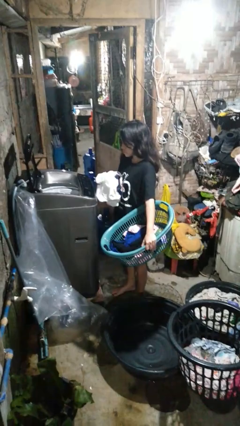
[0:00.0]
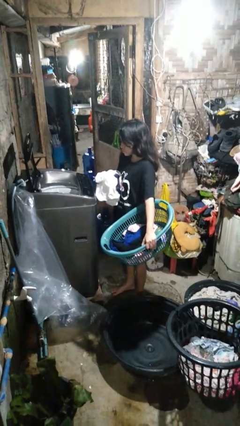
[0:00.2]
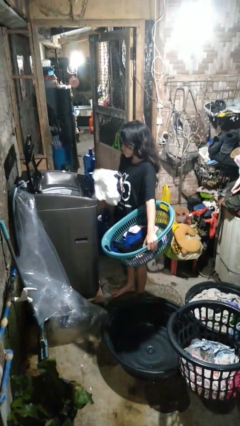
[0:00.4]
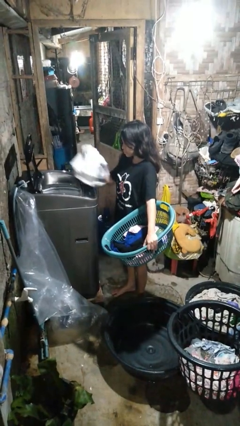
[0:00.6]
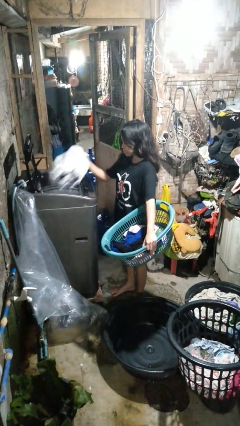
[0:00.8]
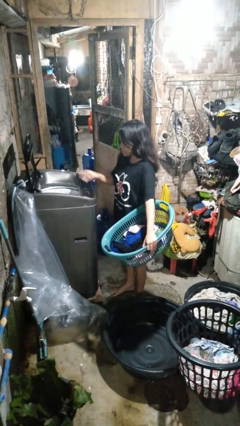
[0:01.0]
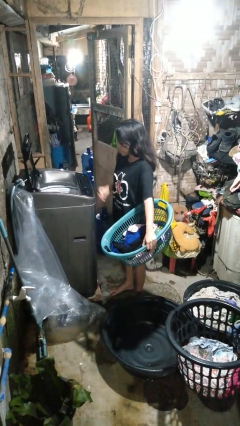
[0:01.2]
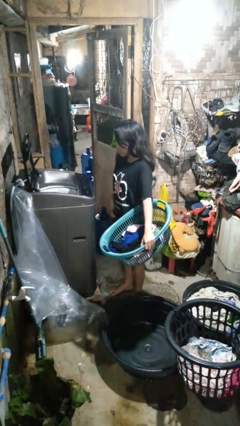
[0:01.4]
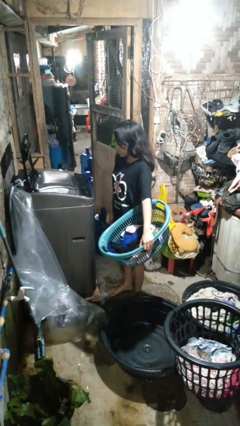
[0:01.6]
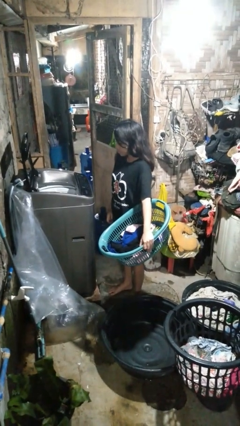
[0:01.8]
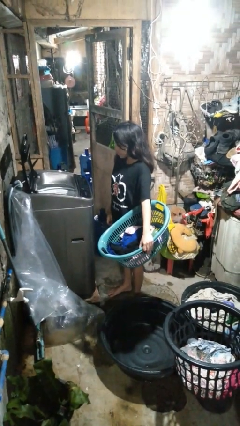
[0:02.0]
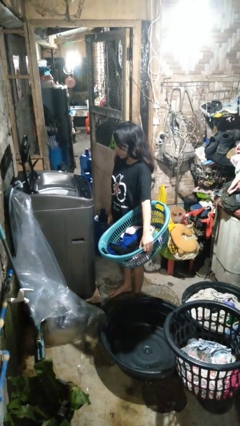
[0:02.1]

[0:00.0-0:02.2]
person loads clotheswasher

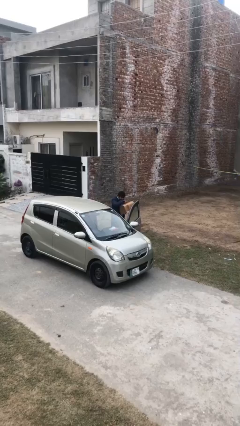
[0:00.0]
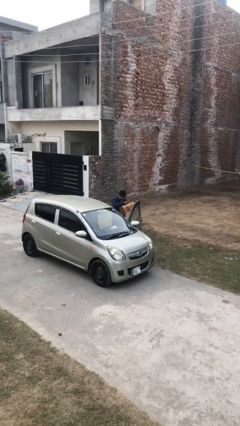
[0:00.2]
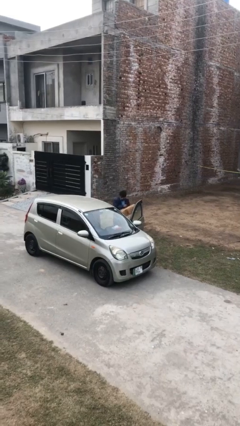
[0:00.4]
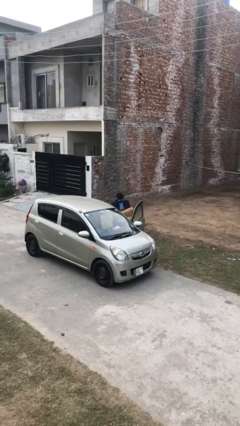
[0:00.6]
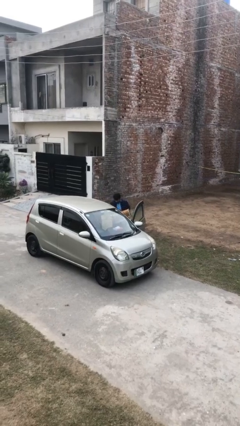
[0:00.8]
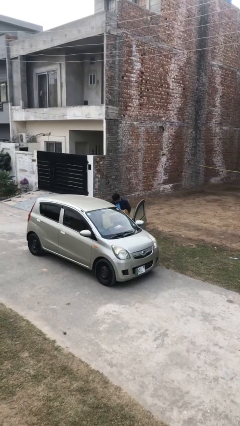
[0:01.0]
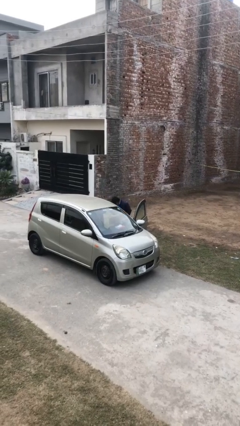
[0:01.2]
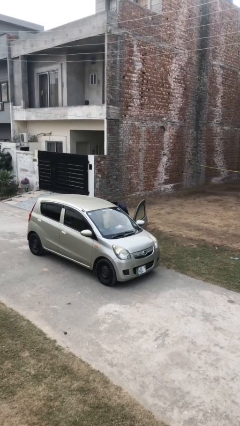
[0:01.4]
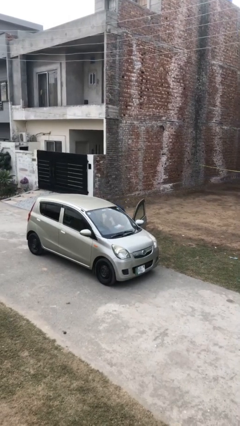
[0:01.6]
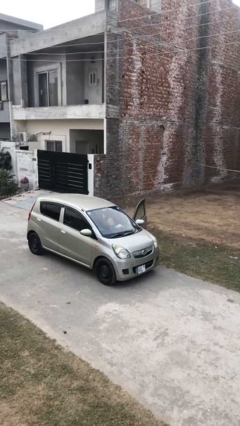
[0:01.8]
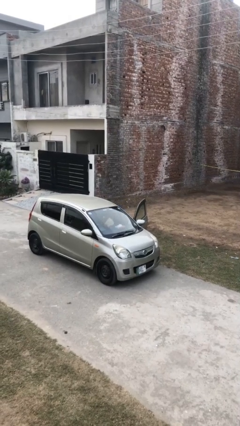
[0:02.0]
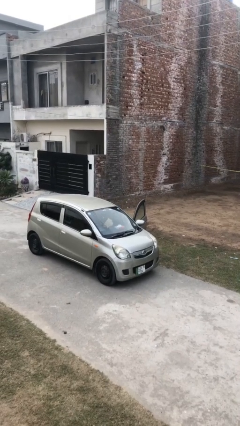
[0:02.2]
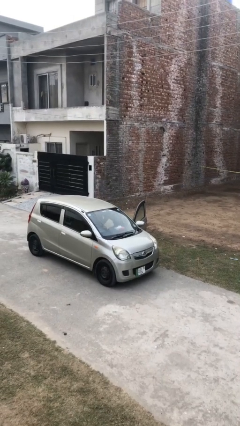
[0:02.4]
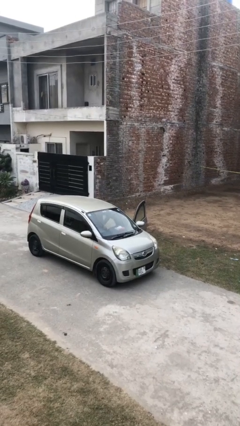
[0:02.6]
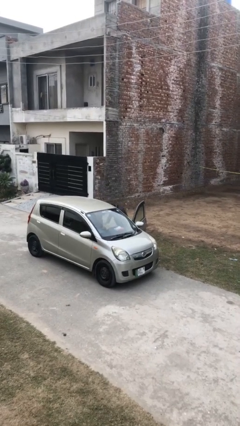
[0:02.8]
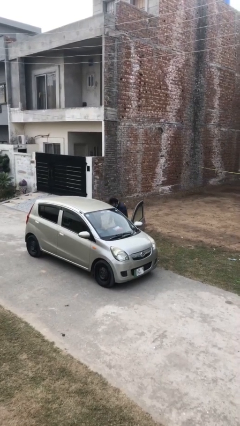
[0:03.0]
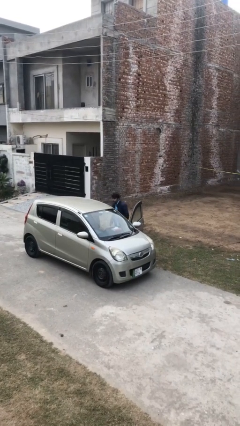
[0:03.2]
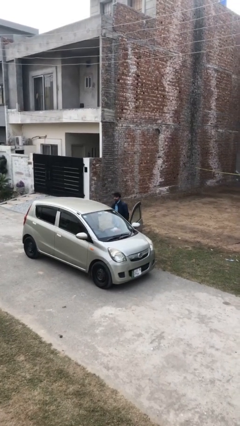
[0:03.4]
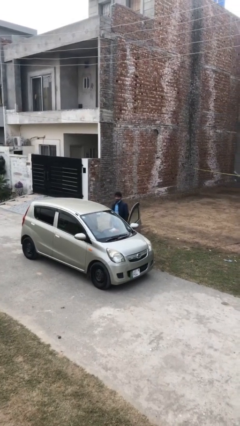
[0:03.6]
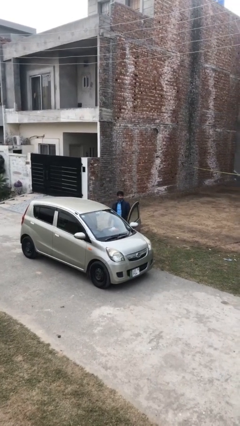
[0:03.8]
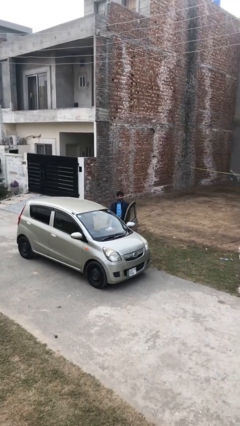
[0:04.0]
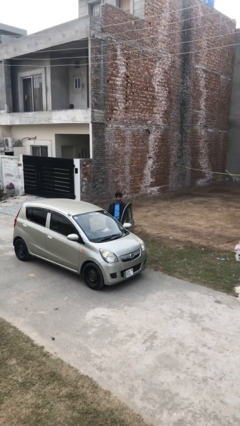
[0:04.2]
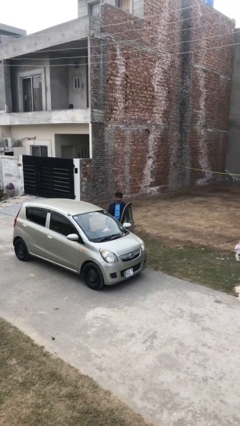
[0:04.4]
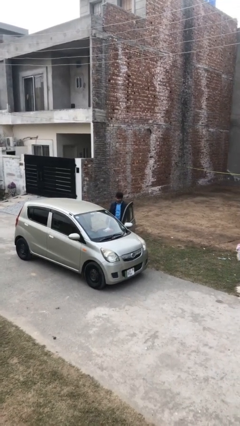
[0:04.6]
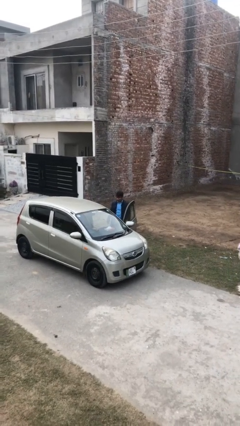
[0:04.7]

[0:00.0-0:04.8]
person loads car

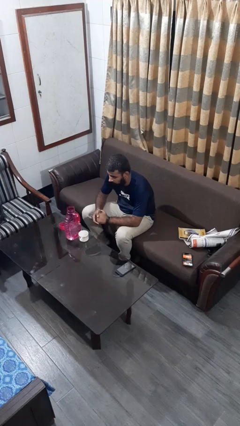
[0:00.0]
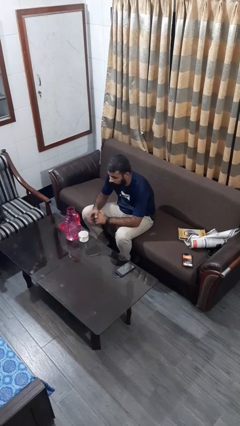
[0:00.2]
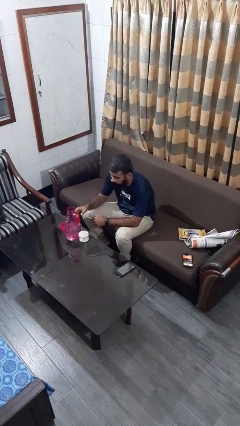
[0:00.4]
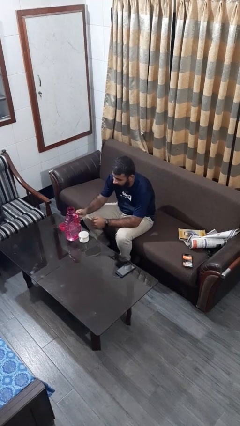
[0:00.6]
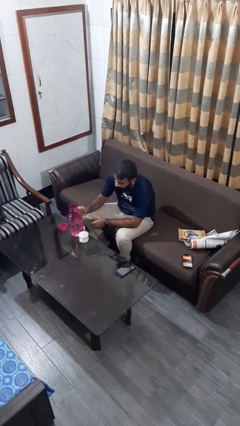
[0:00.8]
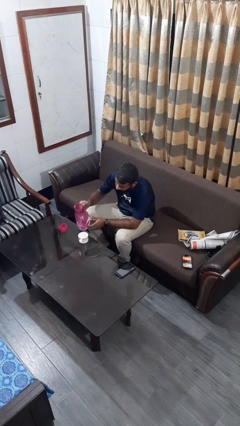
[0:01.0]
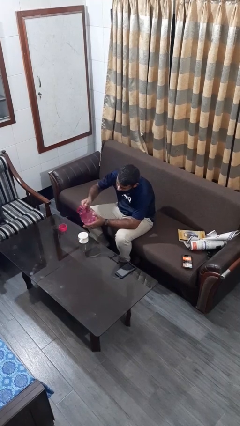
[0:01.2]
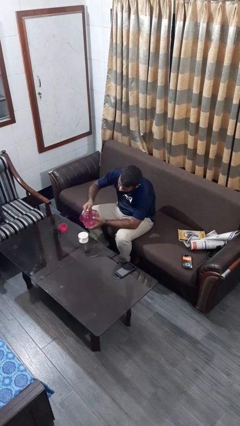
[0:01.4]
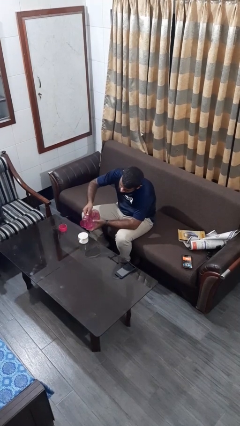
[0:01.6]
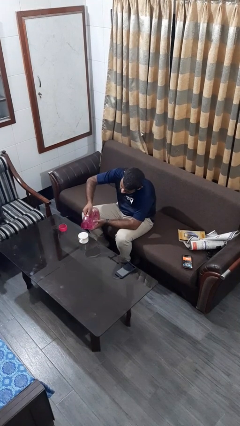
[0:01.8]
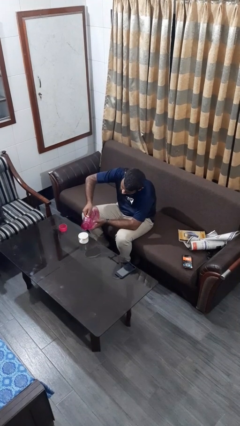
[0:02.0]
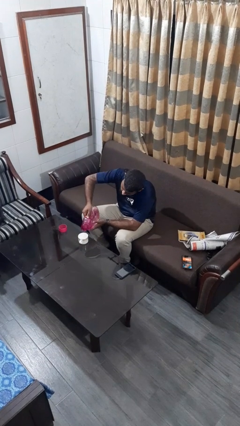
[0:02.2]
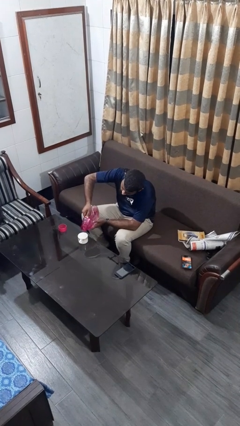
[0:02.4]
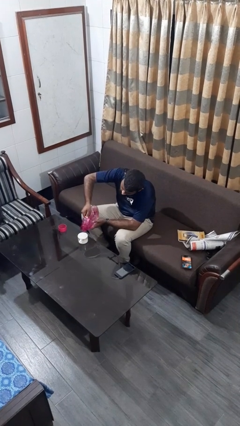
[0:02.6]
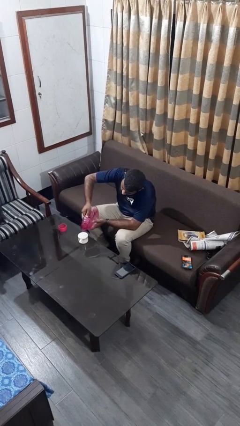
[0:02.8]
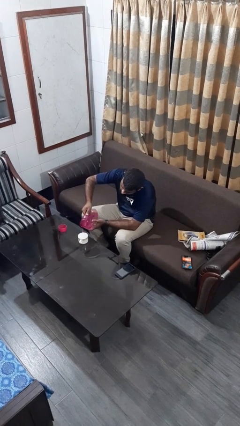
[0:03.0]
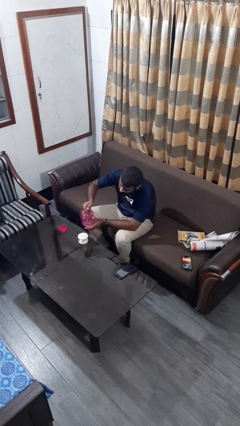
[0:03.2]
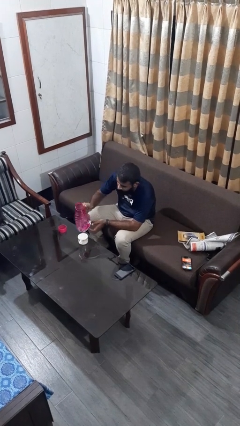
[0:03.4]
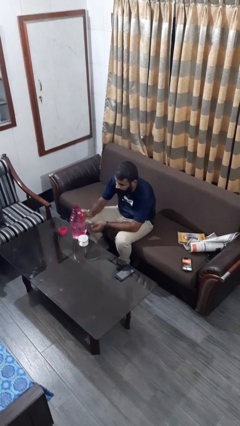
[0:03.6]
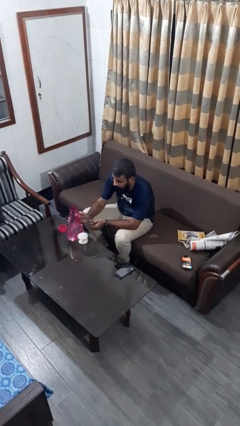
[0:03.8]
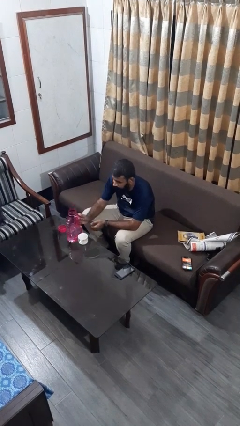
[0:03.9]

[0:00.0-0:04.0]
person pours liquid into cup

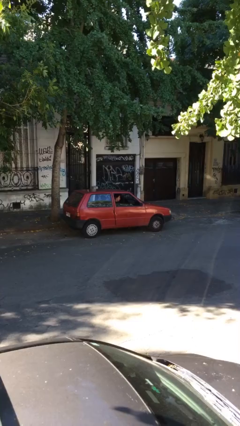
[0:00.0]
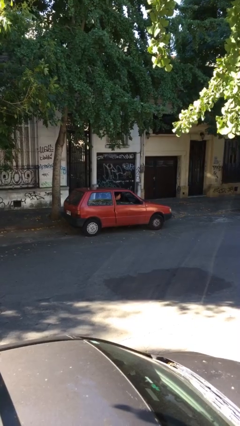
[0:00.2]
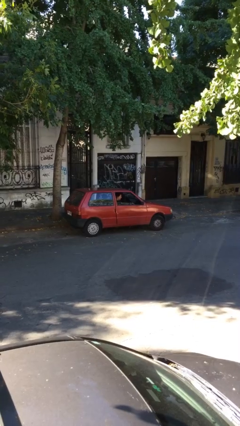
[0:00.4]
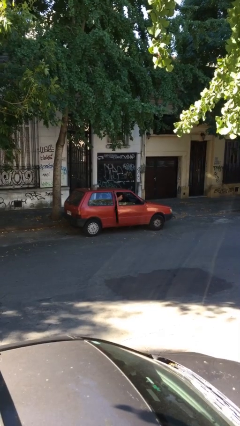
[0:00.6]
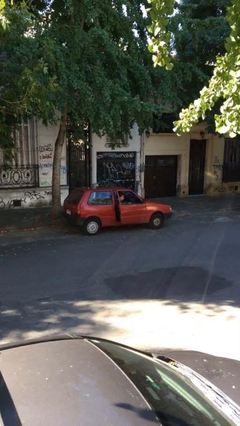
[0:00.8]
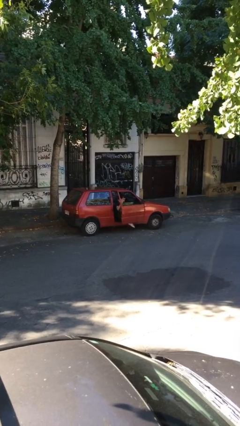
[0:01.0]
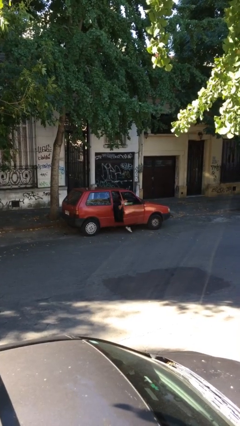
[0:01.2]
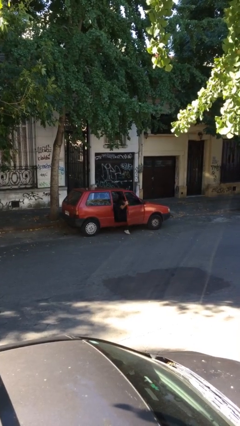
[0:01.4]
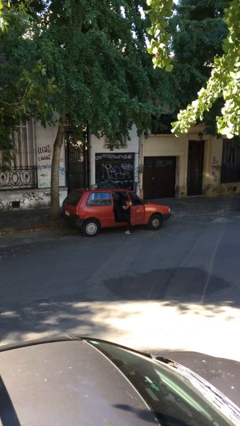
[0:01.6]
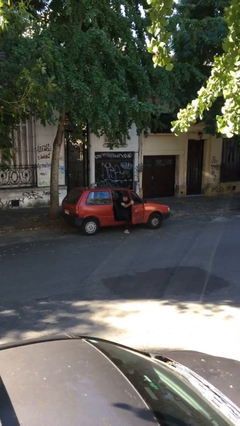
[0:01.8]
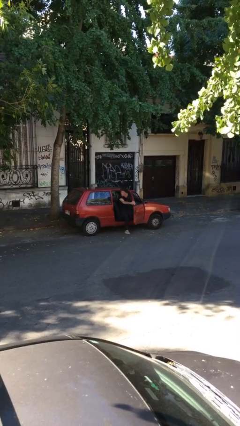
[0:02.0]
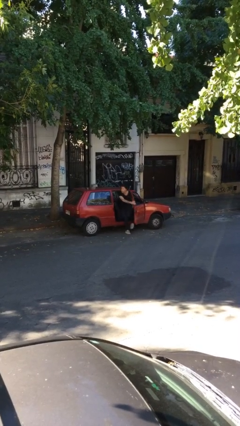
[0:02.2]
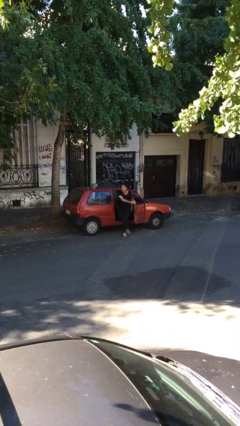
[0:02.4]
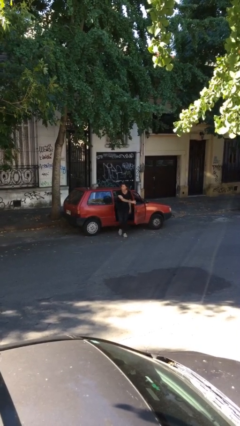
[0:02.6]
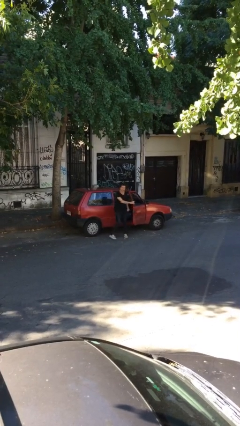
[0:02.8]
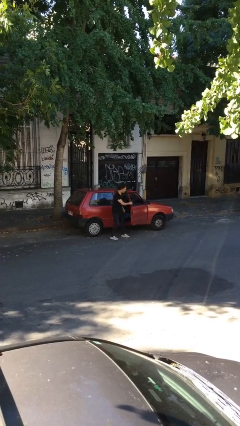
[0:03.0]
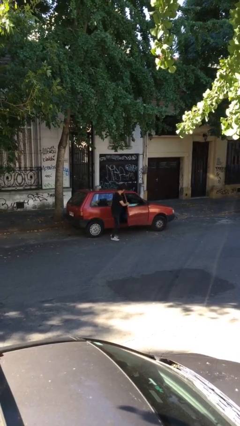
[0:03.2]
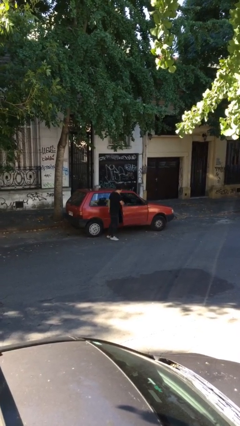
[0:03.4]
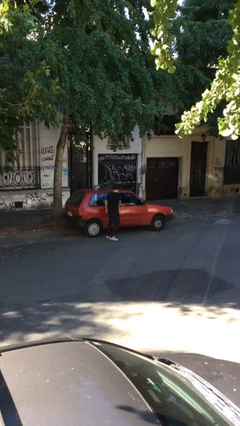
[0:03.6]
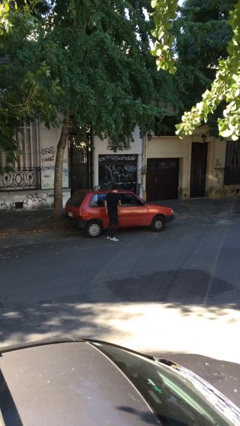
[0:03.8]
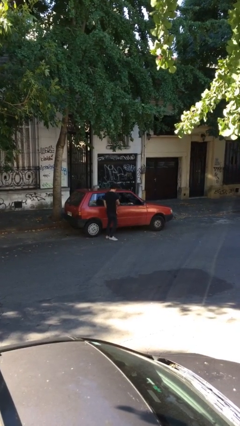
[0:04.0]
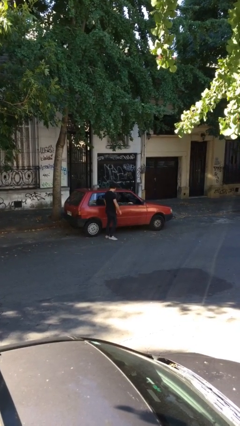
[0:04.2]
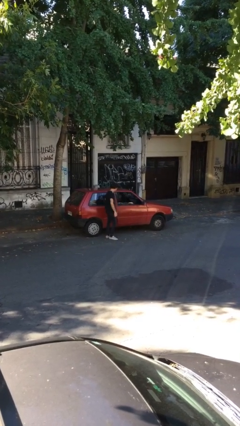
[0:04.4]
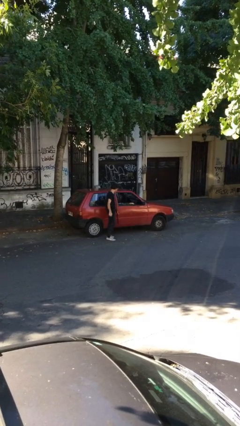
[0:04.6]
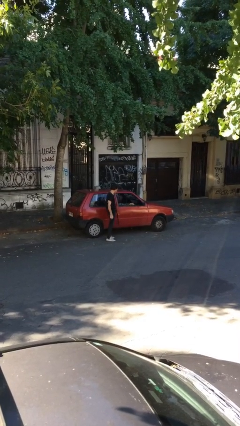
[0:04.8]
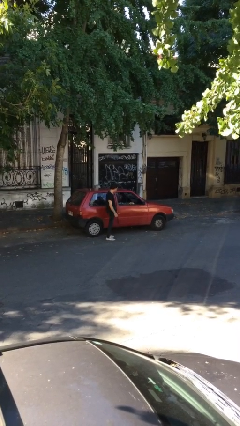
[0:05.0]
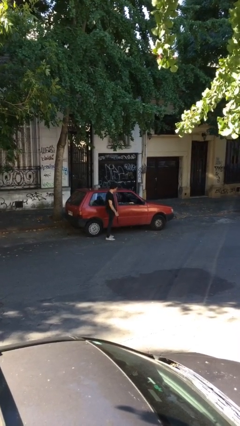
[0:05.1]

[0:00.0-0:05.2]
car drops off person

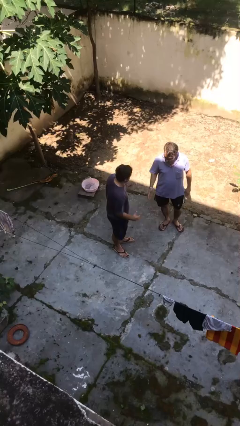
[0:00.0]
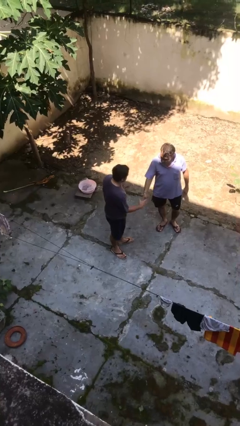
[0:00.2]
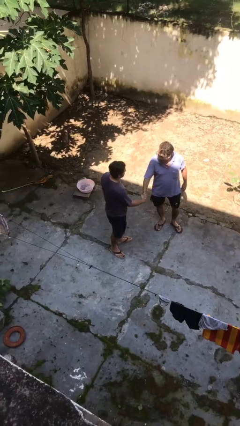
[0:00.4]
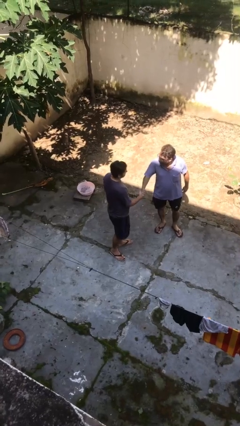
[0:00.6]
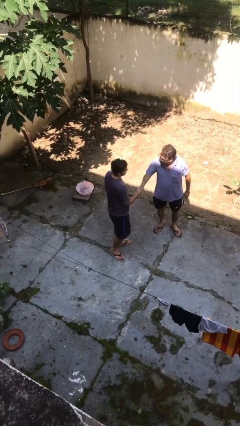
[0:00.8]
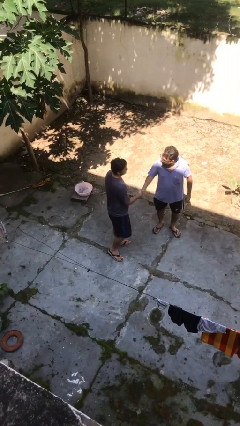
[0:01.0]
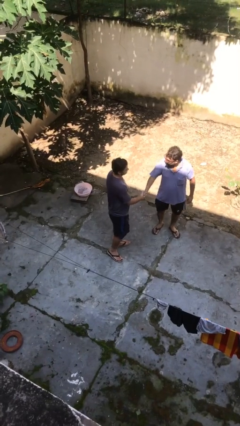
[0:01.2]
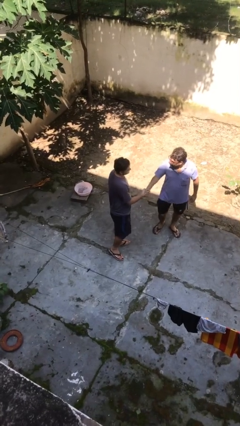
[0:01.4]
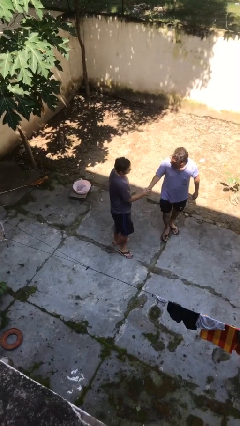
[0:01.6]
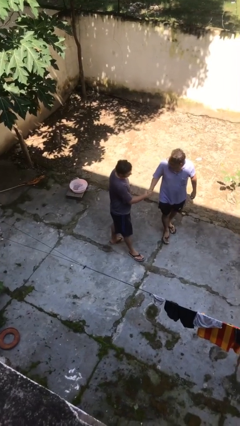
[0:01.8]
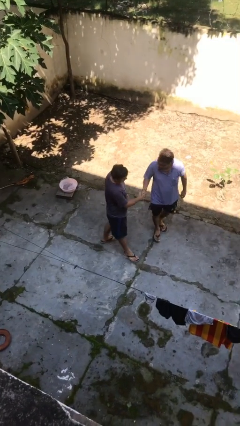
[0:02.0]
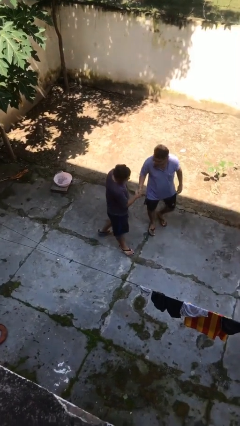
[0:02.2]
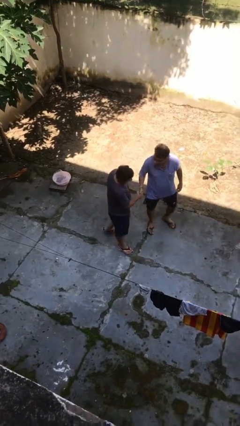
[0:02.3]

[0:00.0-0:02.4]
person shakes hand
